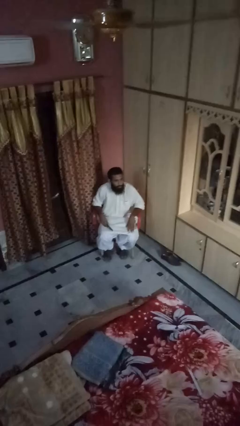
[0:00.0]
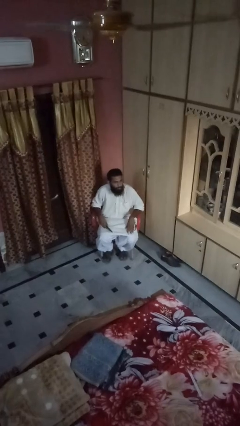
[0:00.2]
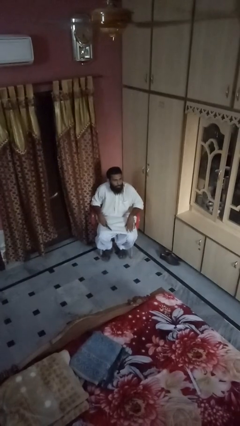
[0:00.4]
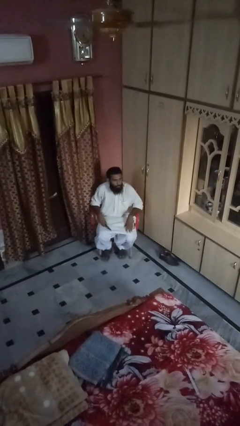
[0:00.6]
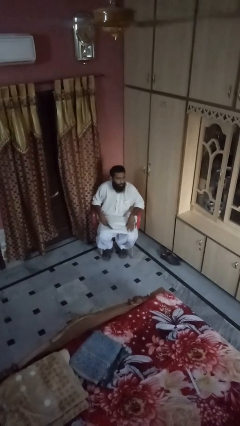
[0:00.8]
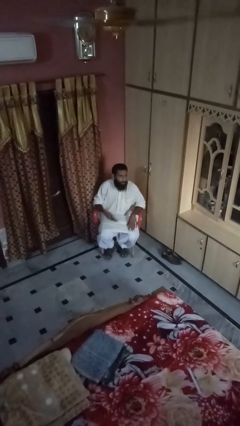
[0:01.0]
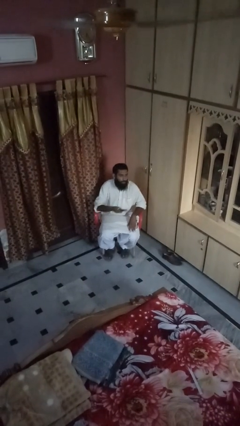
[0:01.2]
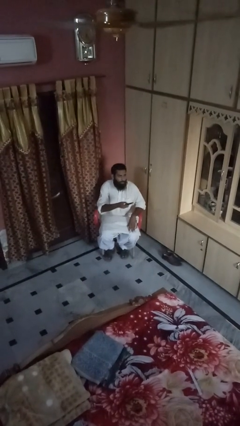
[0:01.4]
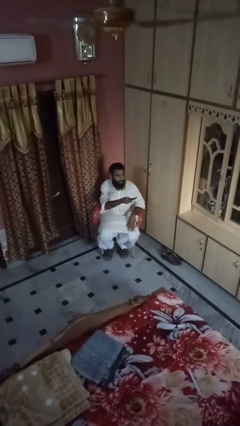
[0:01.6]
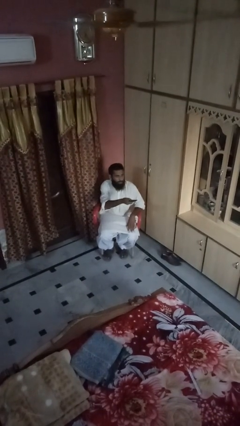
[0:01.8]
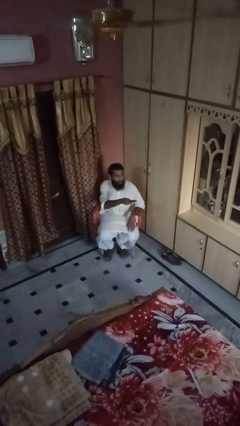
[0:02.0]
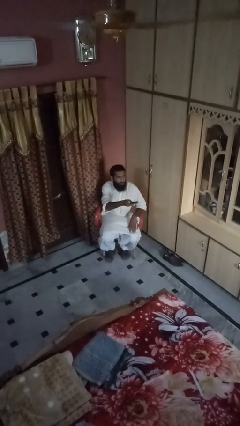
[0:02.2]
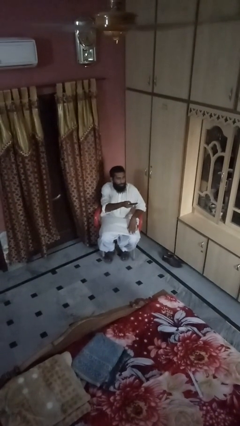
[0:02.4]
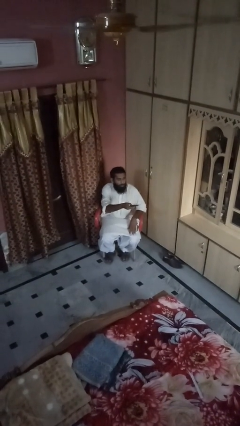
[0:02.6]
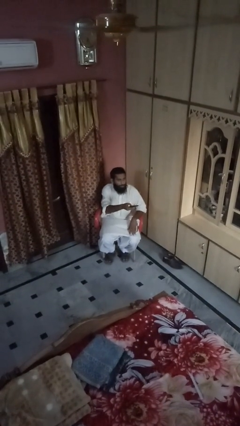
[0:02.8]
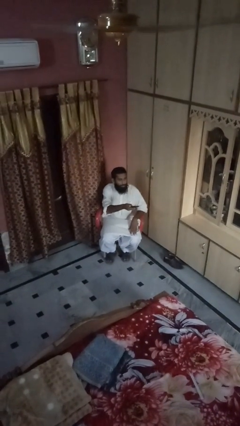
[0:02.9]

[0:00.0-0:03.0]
person uses television remote

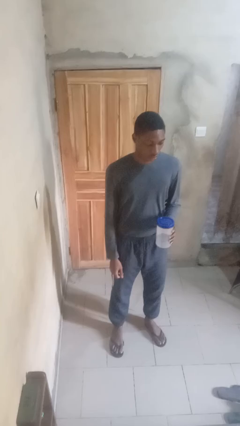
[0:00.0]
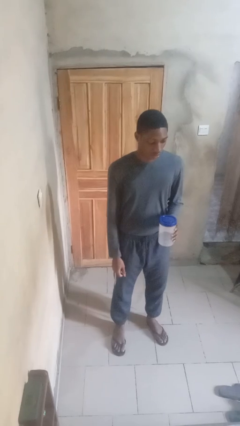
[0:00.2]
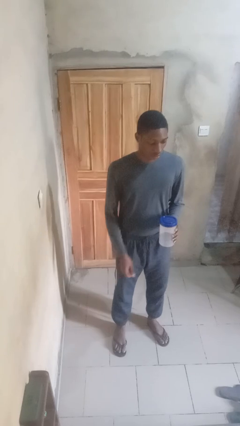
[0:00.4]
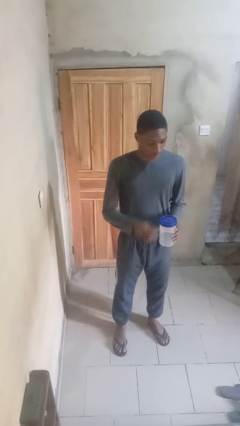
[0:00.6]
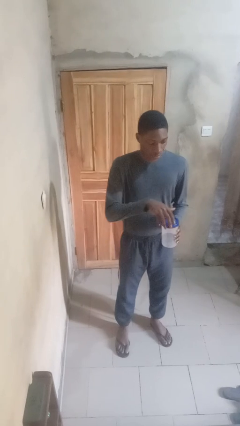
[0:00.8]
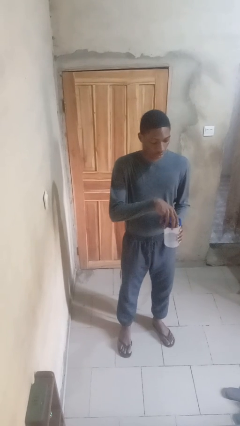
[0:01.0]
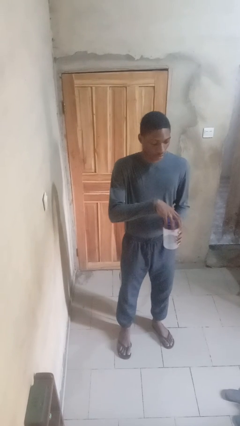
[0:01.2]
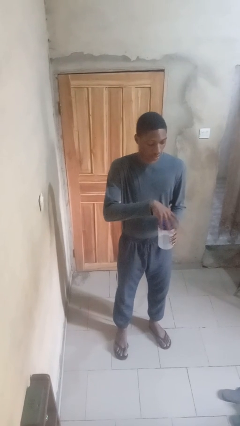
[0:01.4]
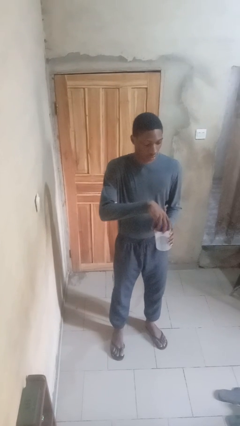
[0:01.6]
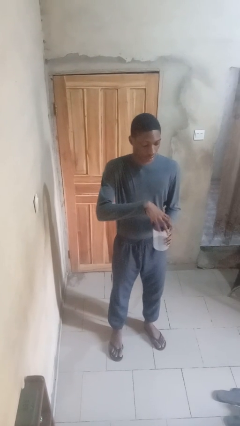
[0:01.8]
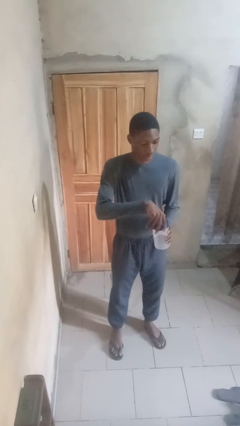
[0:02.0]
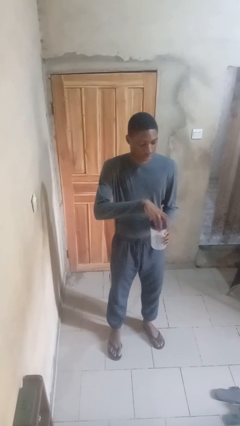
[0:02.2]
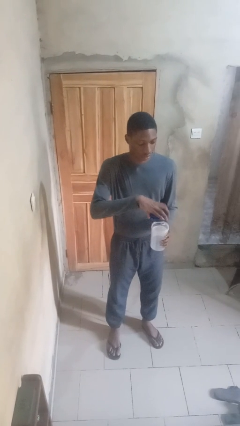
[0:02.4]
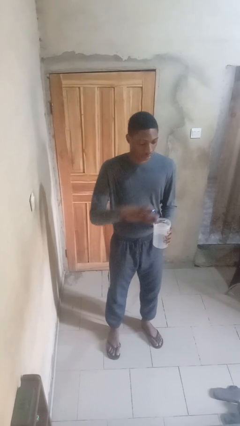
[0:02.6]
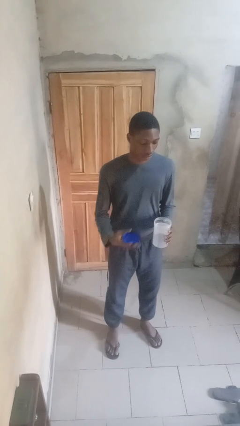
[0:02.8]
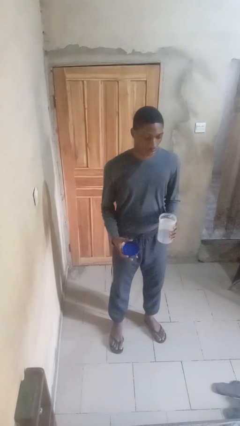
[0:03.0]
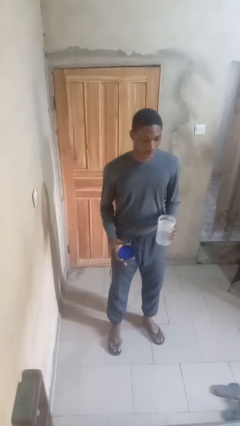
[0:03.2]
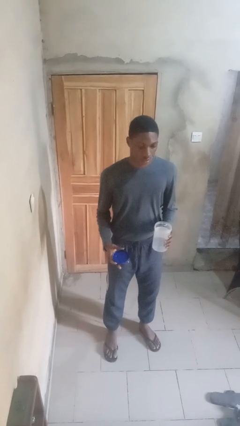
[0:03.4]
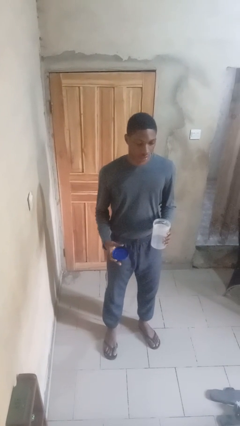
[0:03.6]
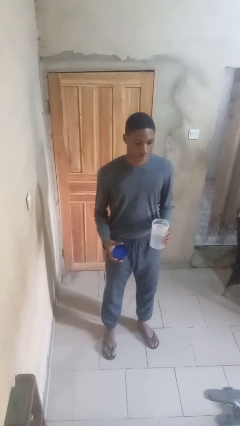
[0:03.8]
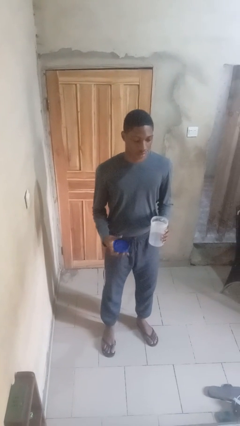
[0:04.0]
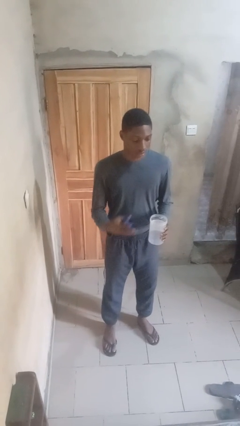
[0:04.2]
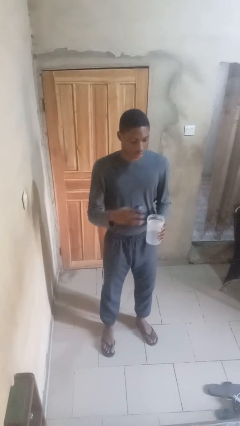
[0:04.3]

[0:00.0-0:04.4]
person opens jar

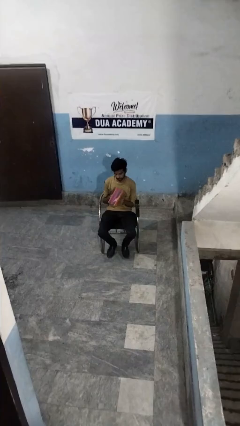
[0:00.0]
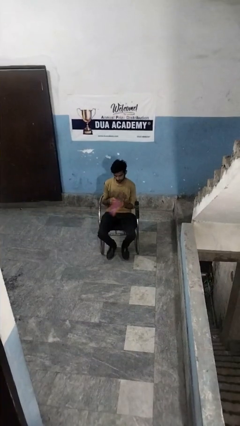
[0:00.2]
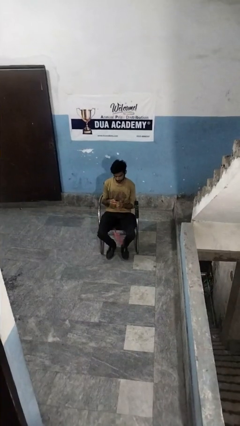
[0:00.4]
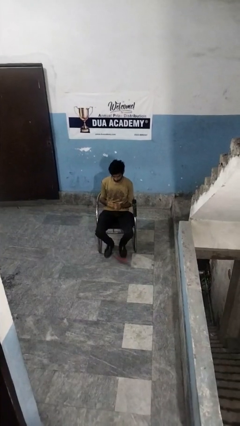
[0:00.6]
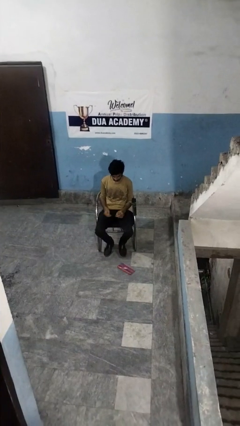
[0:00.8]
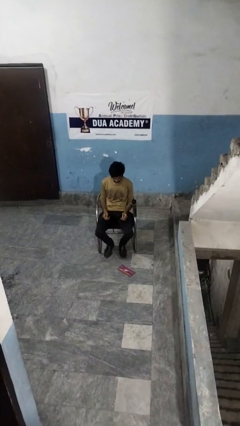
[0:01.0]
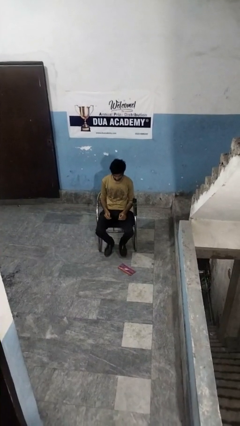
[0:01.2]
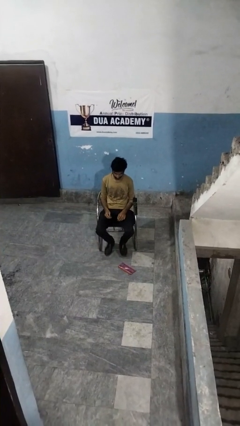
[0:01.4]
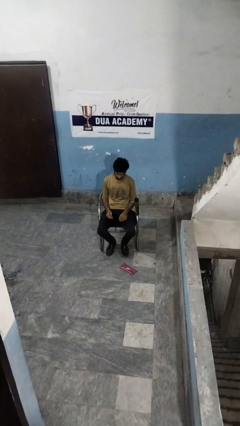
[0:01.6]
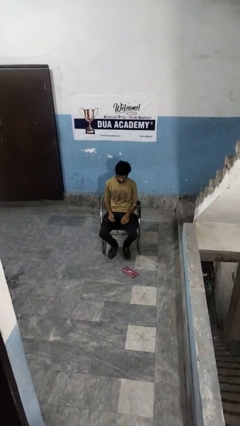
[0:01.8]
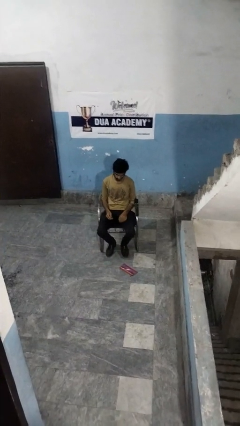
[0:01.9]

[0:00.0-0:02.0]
person drops object

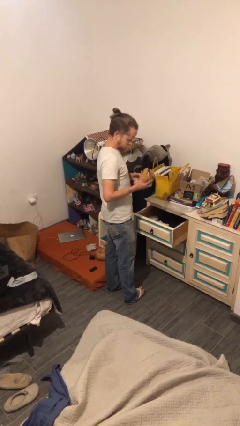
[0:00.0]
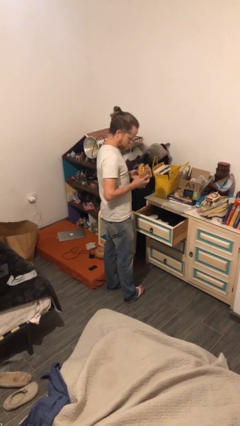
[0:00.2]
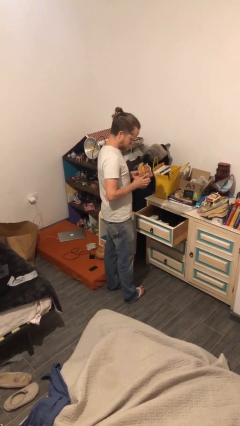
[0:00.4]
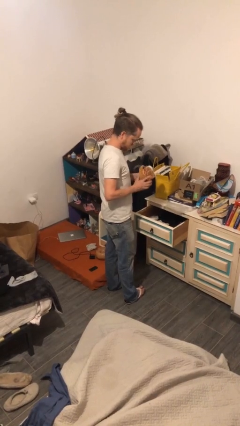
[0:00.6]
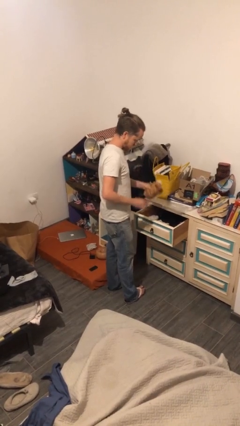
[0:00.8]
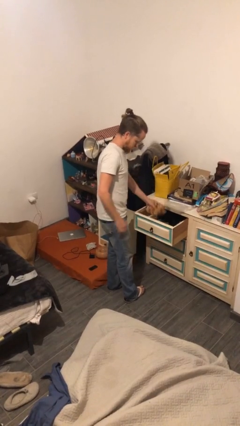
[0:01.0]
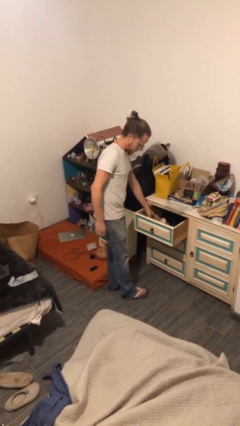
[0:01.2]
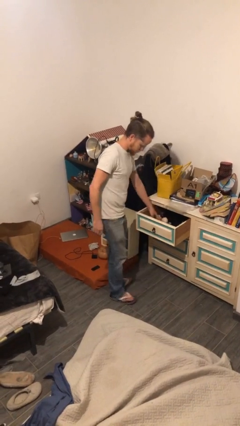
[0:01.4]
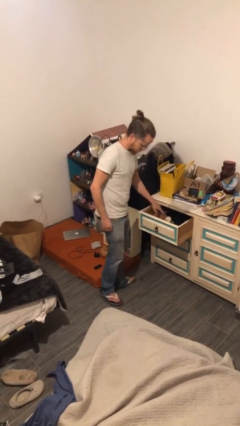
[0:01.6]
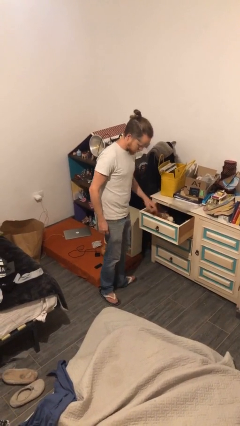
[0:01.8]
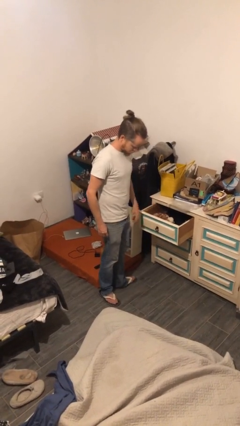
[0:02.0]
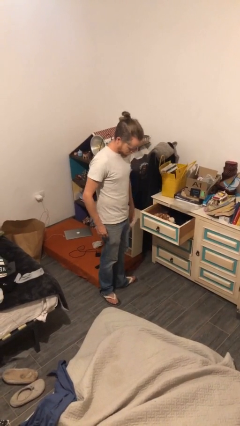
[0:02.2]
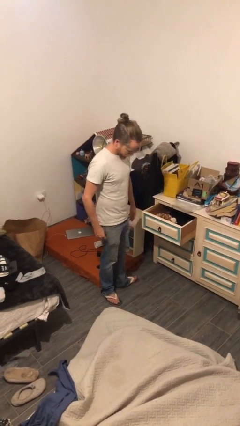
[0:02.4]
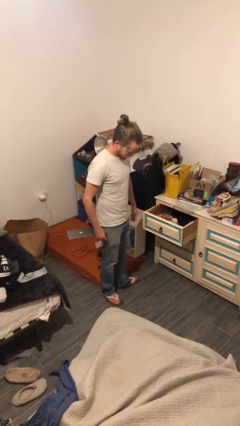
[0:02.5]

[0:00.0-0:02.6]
person puts down object into cabinet

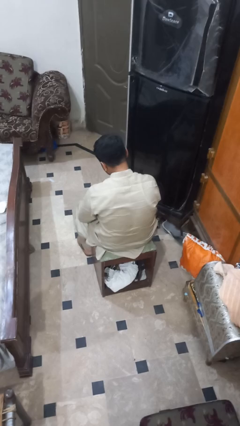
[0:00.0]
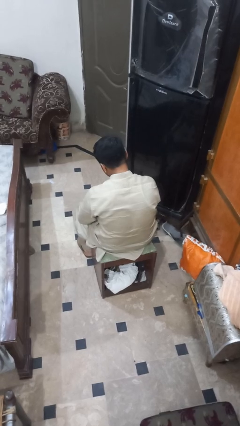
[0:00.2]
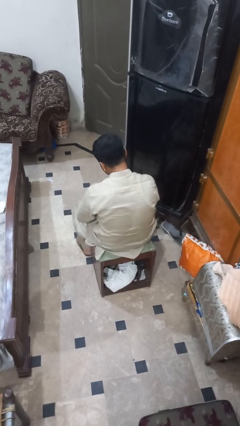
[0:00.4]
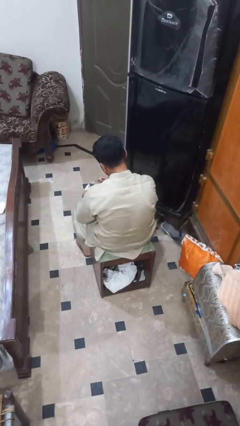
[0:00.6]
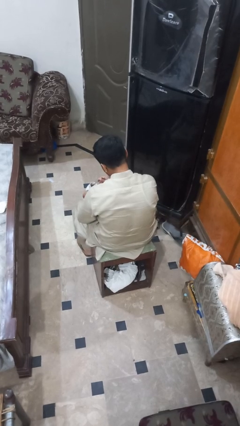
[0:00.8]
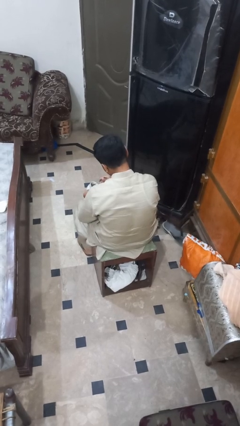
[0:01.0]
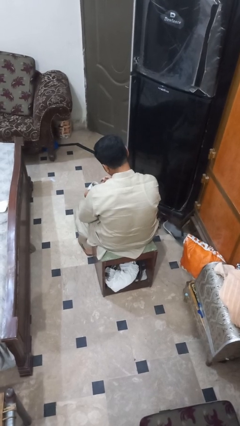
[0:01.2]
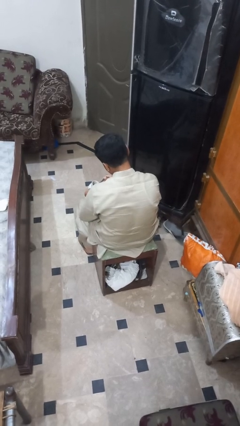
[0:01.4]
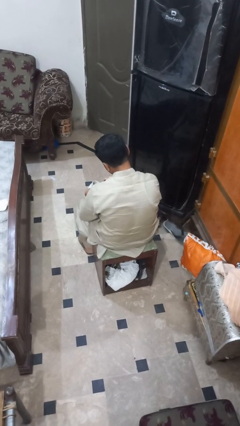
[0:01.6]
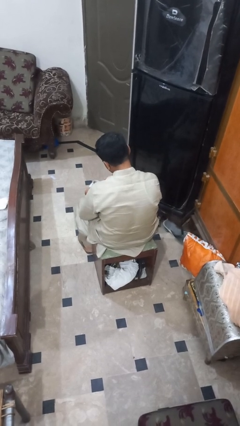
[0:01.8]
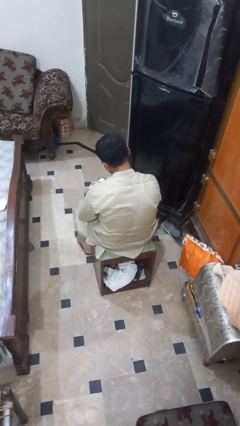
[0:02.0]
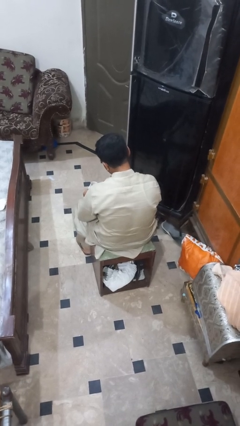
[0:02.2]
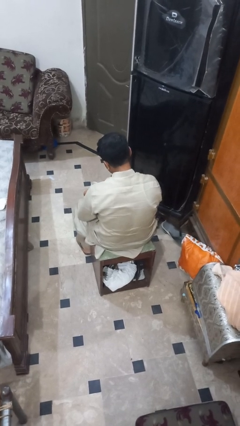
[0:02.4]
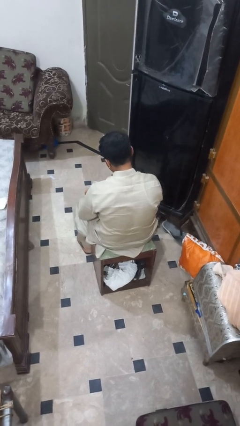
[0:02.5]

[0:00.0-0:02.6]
person stirs mug

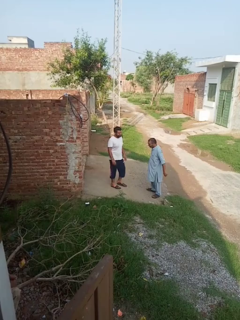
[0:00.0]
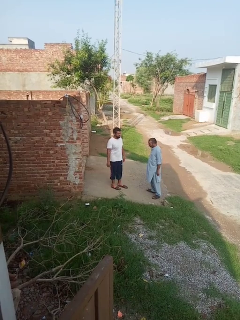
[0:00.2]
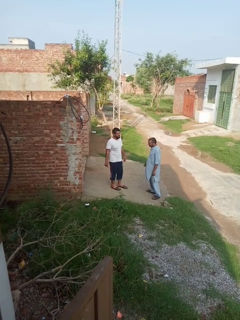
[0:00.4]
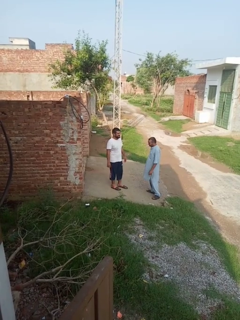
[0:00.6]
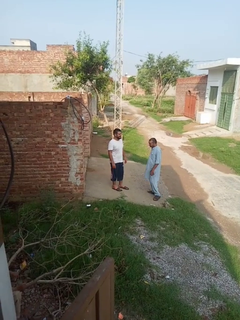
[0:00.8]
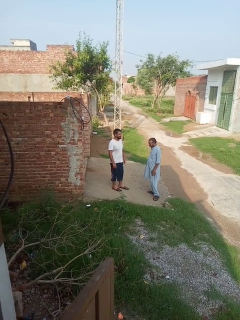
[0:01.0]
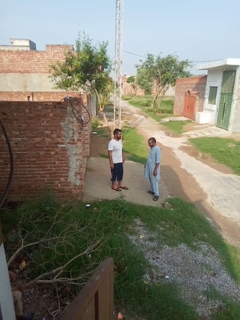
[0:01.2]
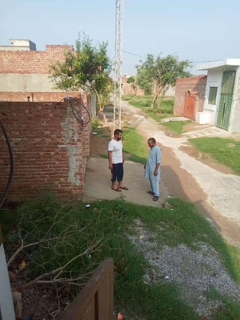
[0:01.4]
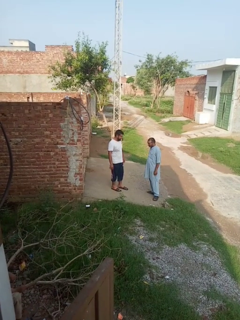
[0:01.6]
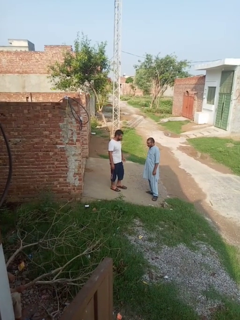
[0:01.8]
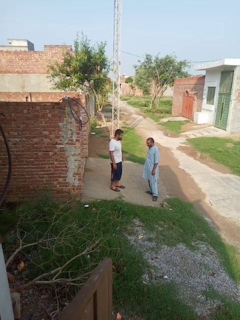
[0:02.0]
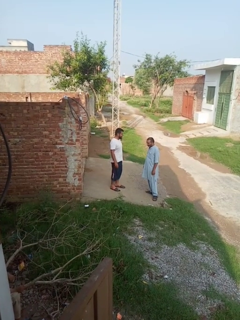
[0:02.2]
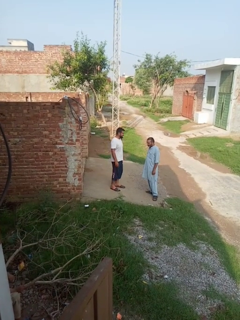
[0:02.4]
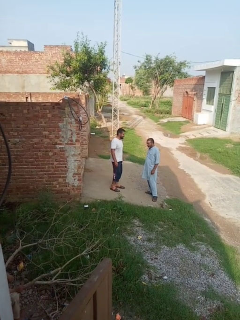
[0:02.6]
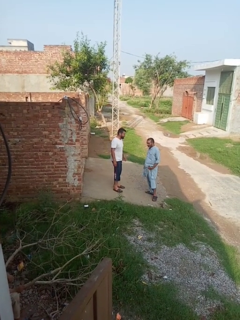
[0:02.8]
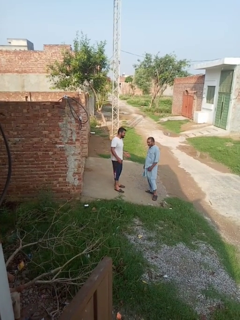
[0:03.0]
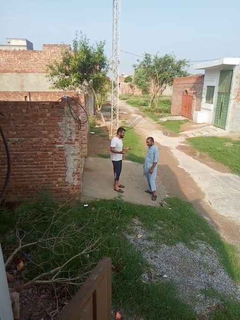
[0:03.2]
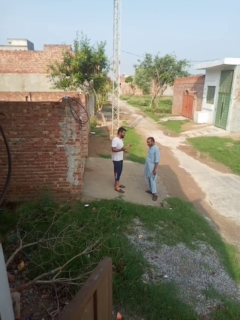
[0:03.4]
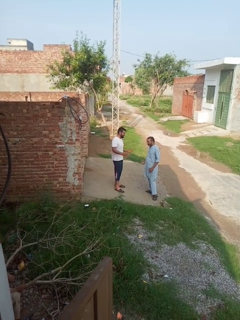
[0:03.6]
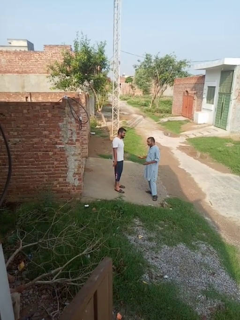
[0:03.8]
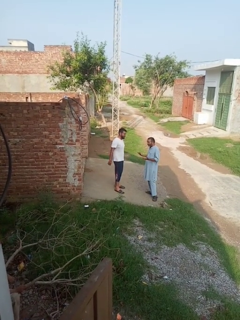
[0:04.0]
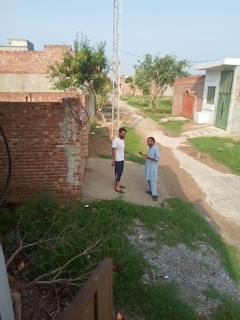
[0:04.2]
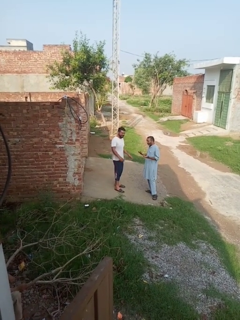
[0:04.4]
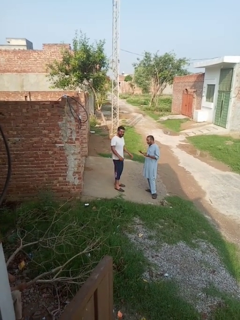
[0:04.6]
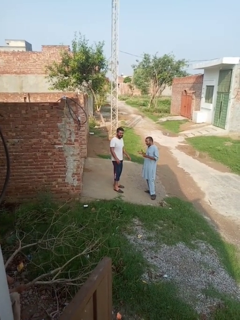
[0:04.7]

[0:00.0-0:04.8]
person laughs with person
